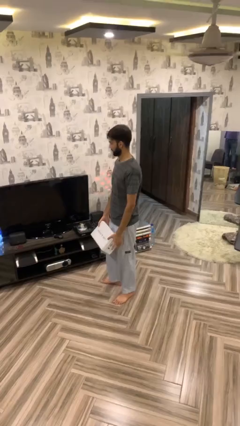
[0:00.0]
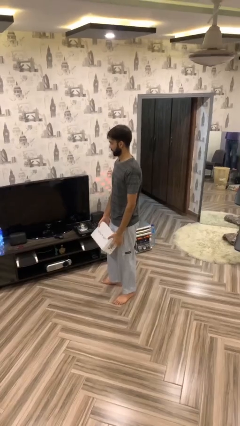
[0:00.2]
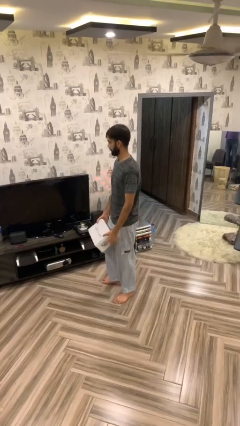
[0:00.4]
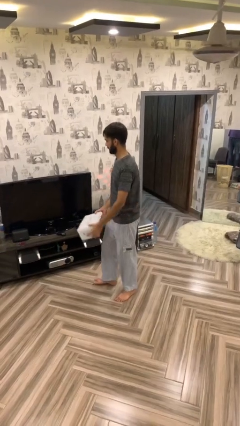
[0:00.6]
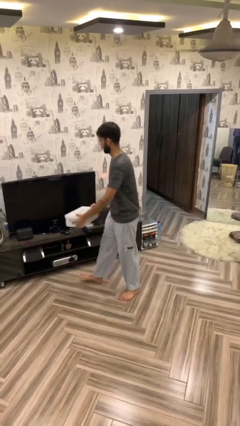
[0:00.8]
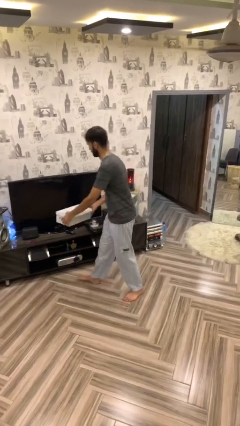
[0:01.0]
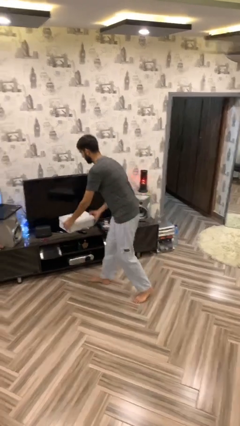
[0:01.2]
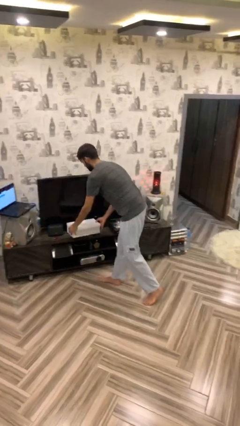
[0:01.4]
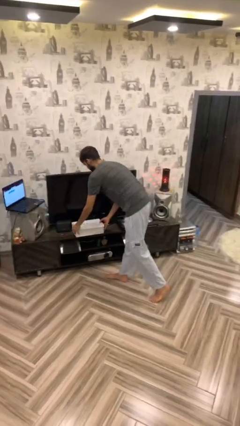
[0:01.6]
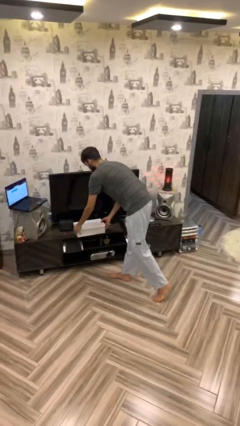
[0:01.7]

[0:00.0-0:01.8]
person puts down object on table

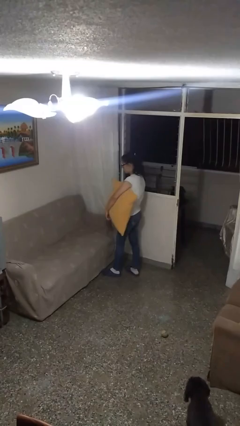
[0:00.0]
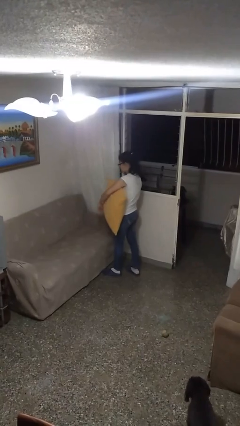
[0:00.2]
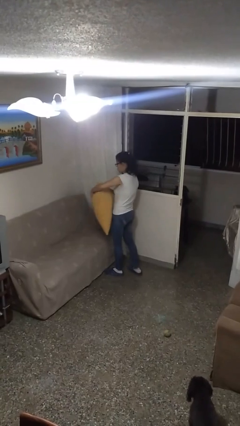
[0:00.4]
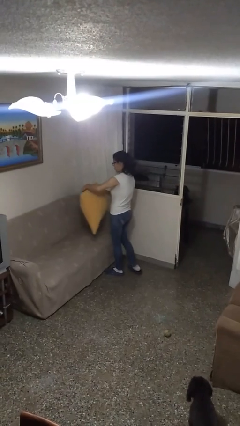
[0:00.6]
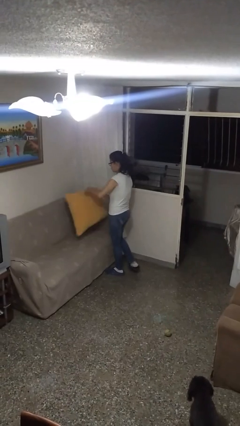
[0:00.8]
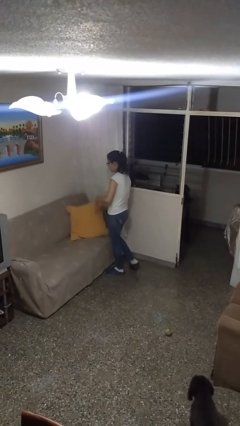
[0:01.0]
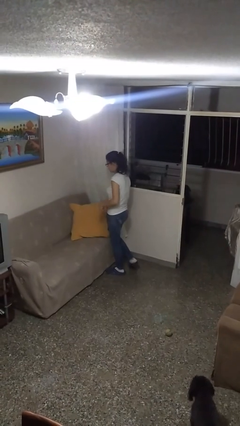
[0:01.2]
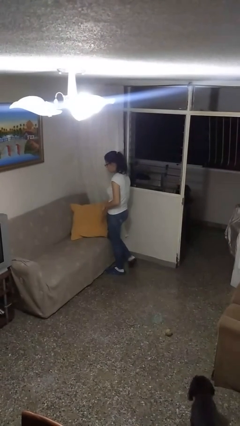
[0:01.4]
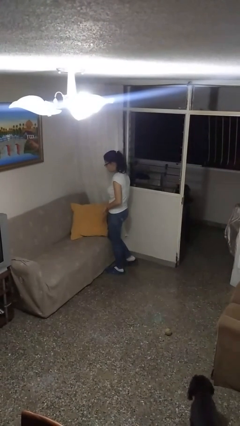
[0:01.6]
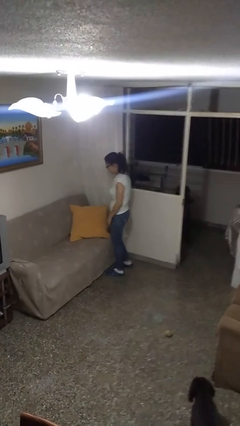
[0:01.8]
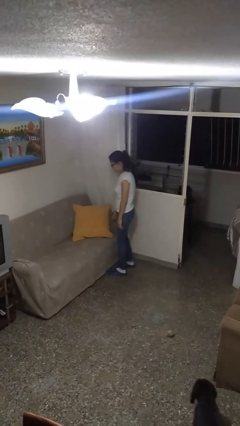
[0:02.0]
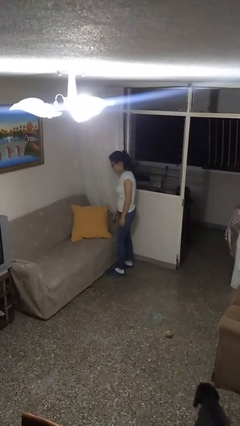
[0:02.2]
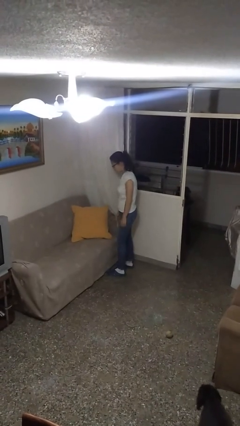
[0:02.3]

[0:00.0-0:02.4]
person puts down object on couch

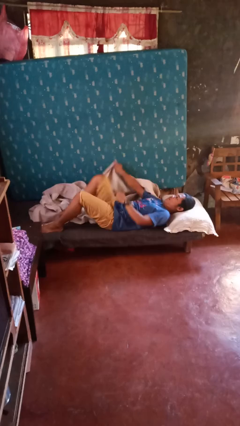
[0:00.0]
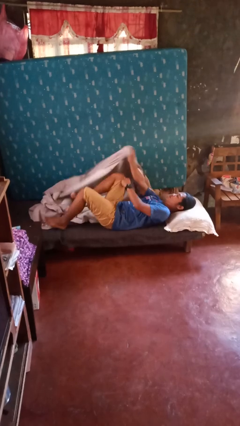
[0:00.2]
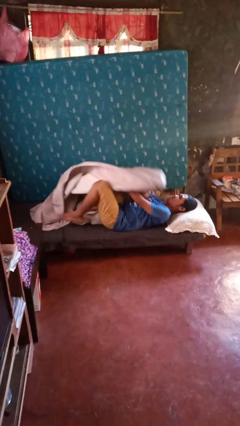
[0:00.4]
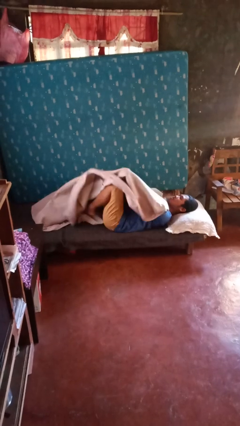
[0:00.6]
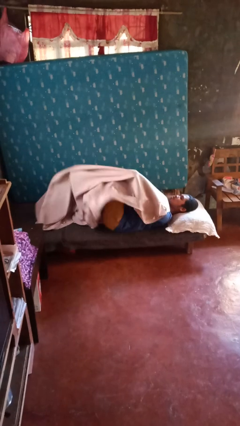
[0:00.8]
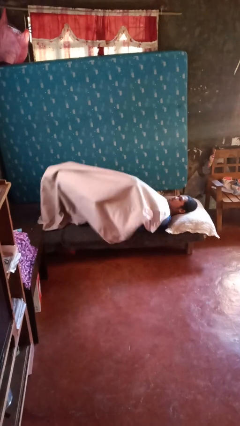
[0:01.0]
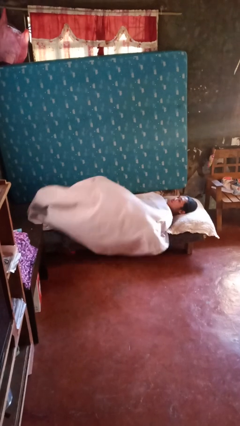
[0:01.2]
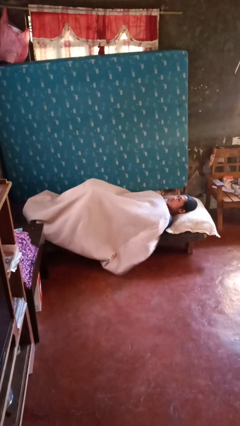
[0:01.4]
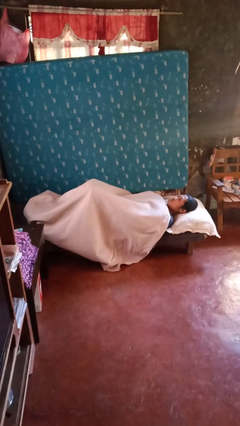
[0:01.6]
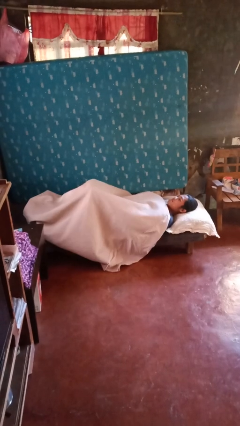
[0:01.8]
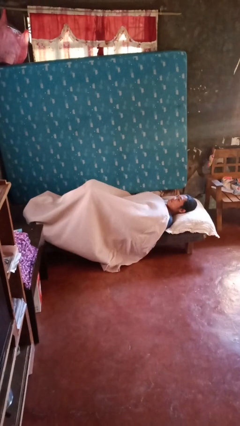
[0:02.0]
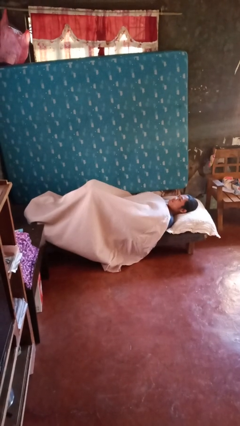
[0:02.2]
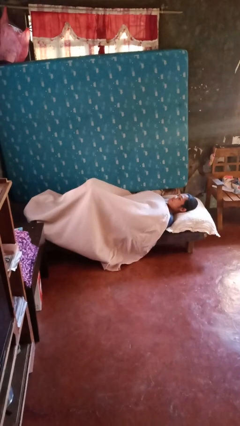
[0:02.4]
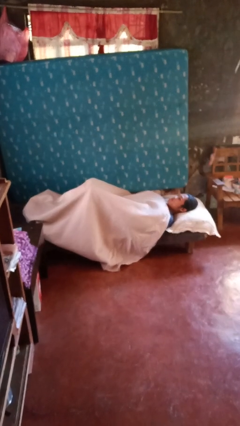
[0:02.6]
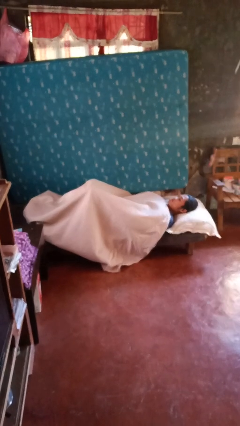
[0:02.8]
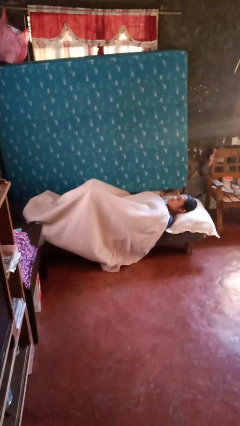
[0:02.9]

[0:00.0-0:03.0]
person covers with bedsheets

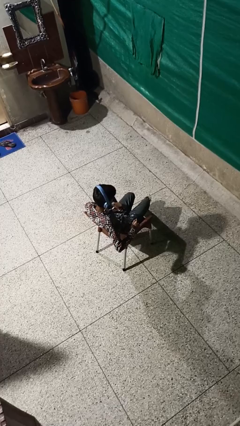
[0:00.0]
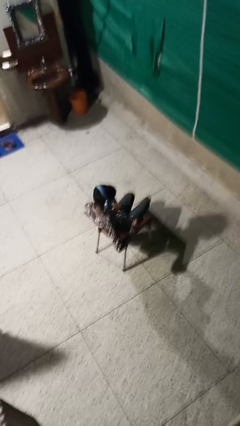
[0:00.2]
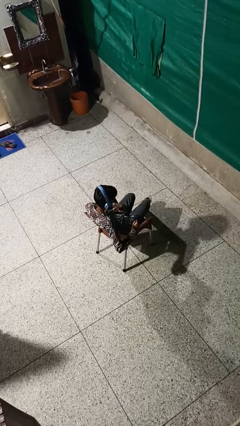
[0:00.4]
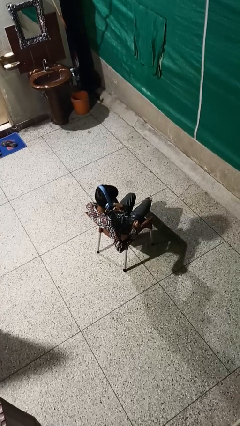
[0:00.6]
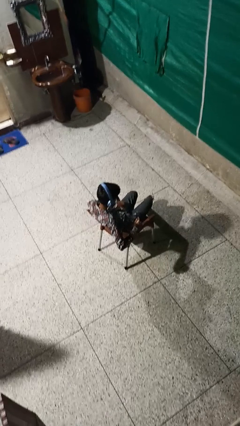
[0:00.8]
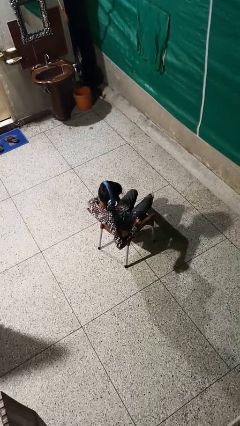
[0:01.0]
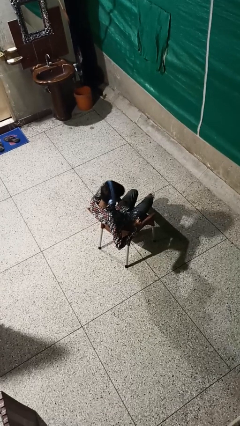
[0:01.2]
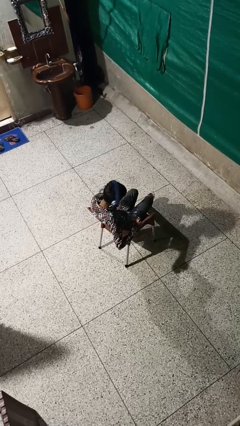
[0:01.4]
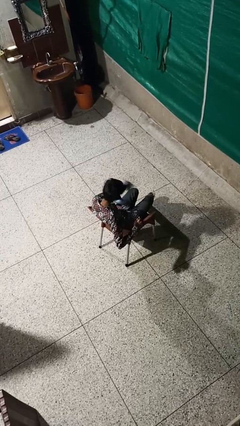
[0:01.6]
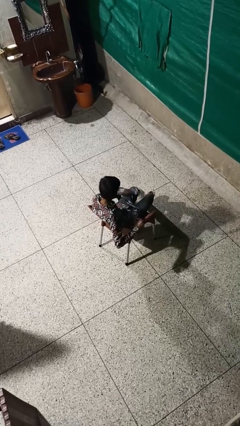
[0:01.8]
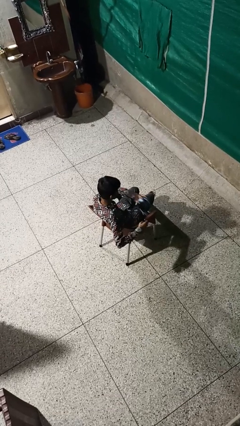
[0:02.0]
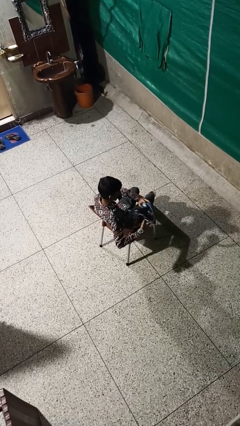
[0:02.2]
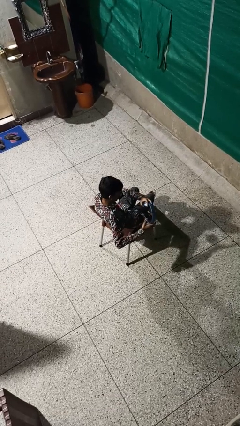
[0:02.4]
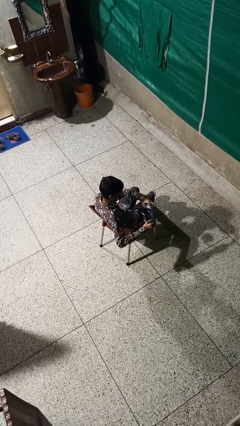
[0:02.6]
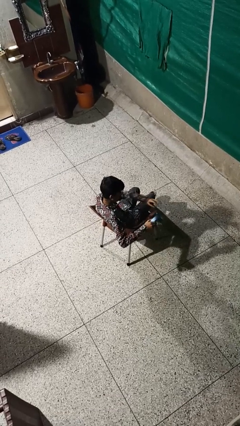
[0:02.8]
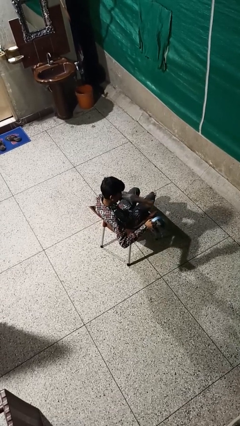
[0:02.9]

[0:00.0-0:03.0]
person takes off headphones

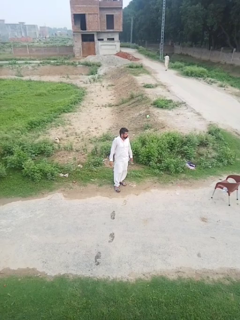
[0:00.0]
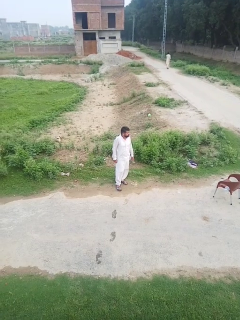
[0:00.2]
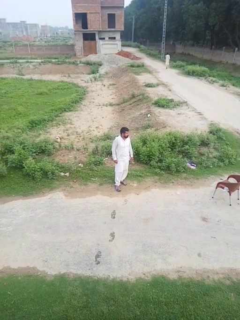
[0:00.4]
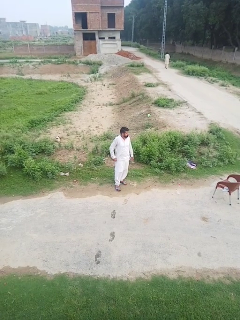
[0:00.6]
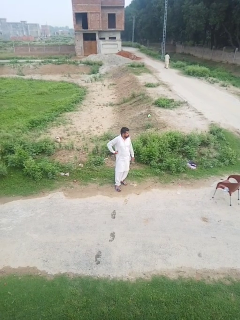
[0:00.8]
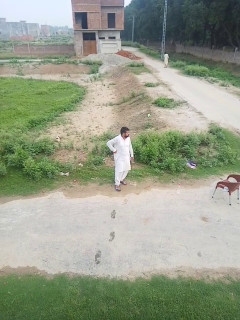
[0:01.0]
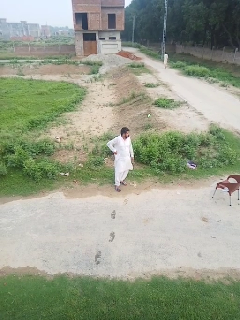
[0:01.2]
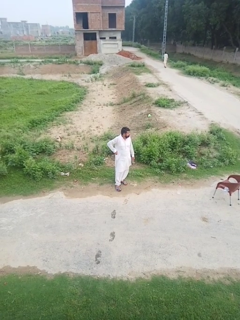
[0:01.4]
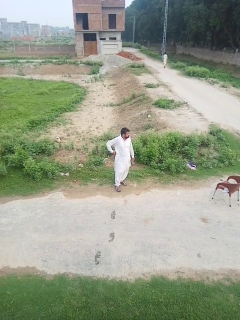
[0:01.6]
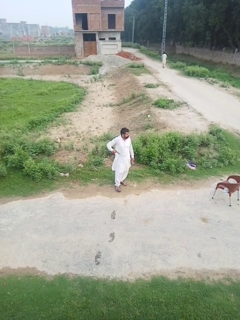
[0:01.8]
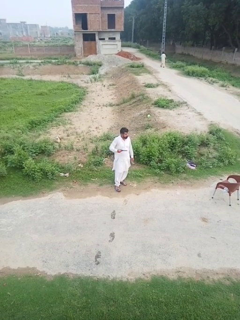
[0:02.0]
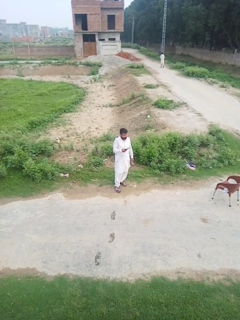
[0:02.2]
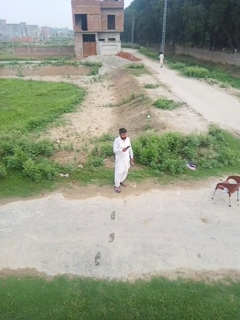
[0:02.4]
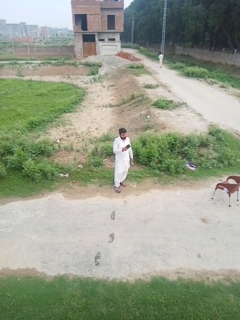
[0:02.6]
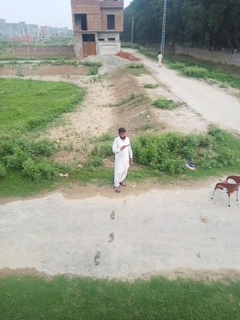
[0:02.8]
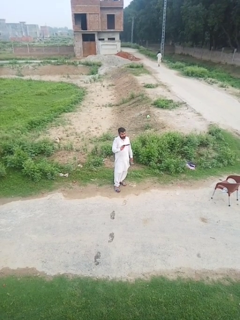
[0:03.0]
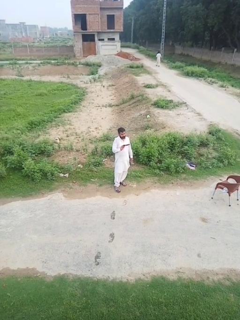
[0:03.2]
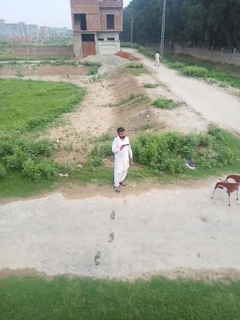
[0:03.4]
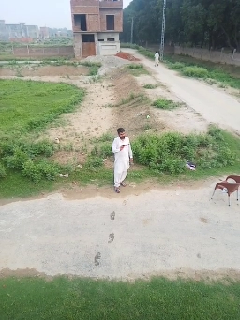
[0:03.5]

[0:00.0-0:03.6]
person takes phone from pocket

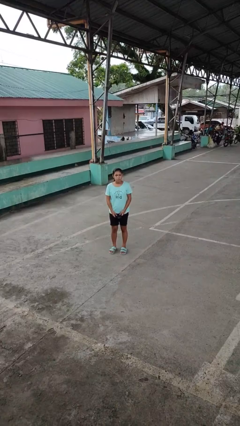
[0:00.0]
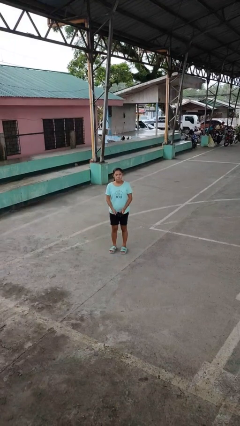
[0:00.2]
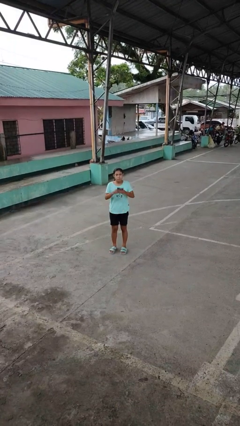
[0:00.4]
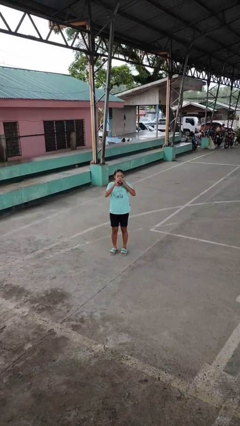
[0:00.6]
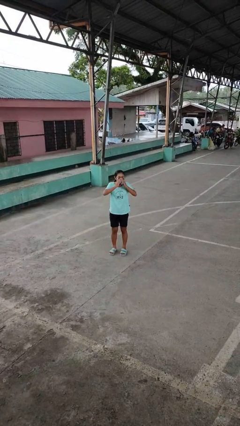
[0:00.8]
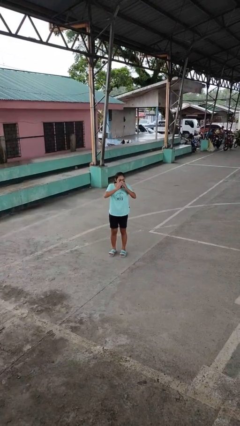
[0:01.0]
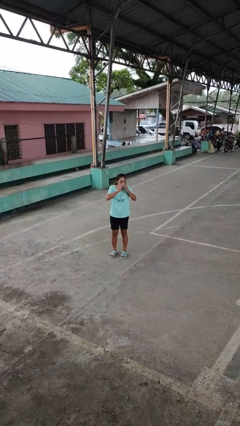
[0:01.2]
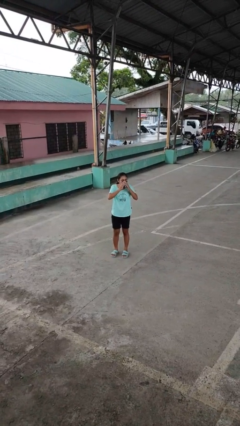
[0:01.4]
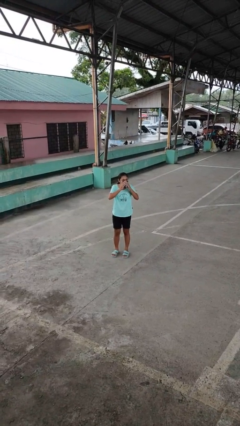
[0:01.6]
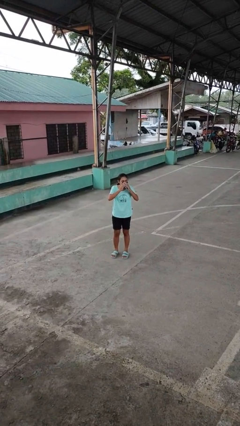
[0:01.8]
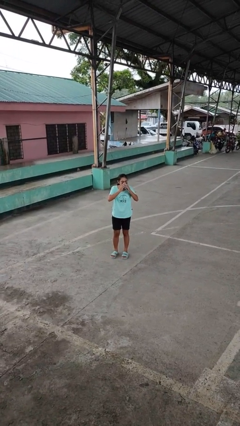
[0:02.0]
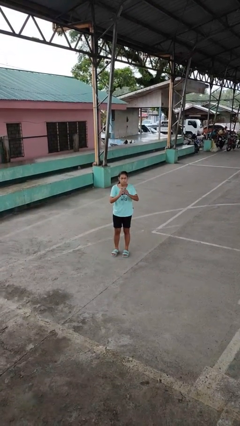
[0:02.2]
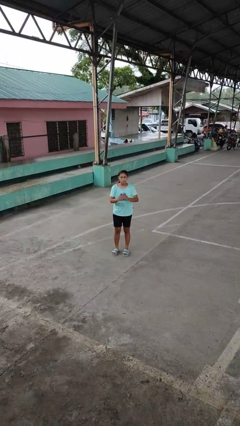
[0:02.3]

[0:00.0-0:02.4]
person blows nose

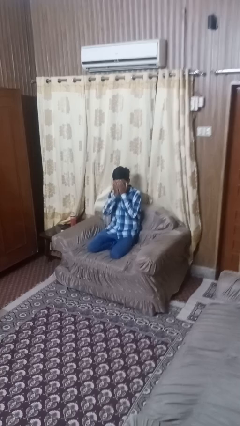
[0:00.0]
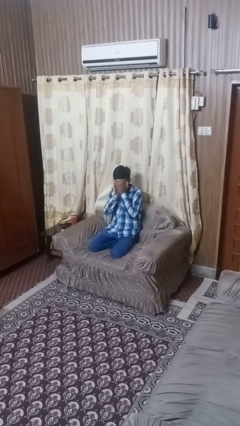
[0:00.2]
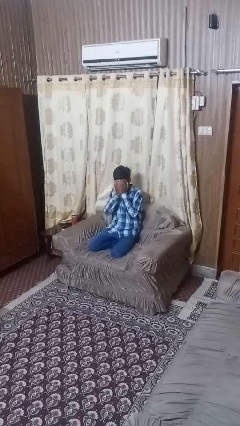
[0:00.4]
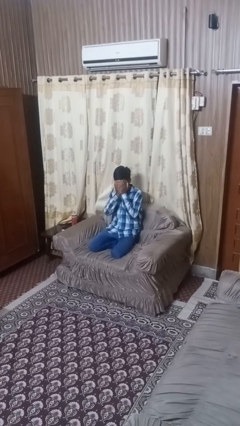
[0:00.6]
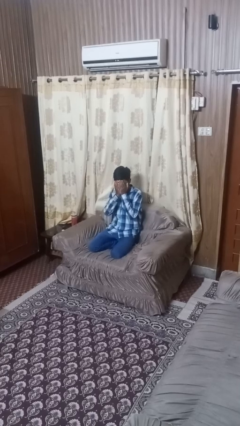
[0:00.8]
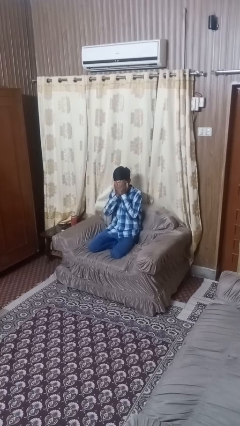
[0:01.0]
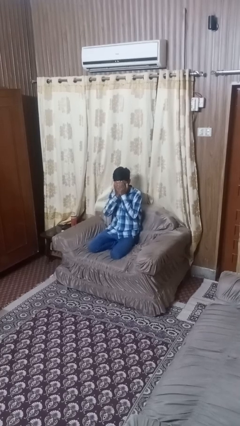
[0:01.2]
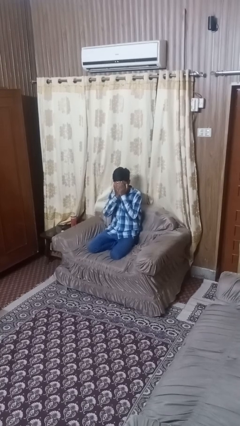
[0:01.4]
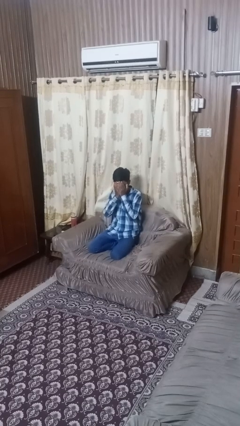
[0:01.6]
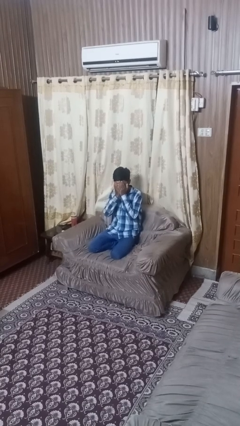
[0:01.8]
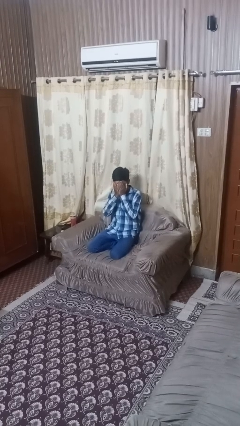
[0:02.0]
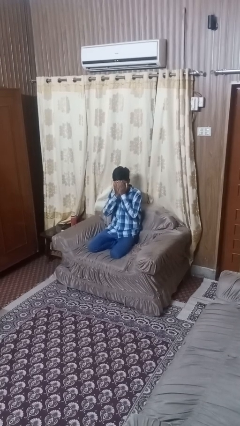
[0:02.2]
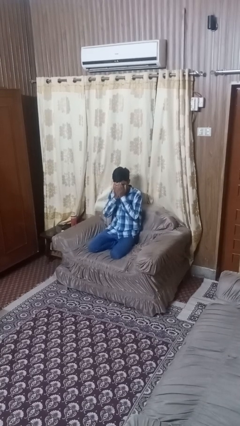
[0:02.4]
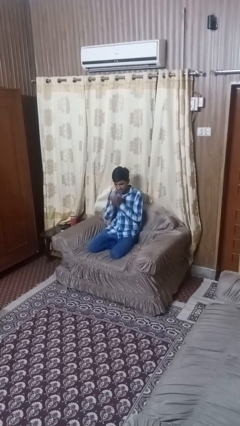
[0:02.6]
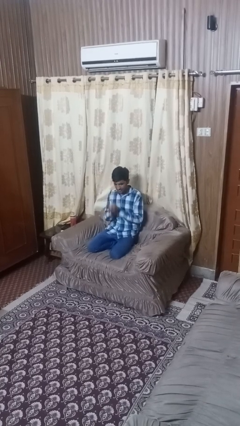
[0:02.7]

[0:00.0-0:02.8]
person covers face with hands
